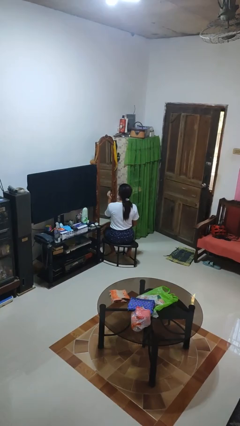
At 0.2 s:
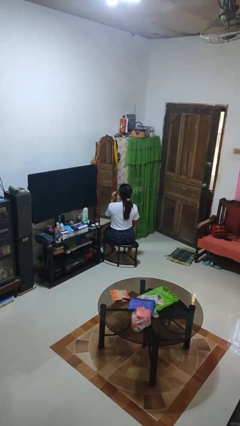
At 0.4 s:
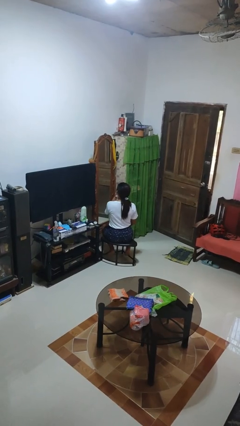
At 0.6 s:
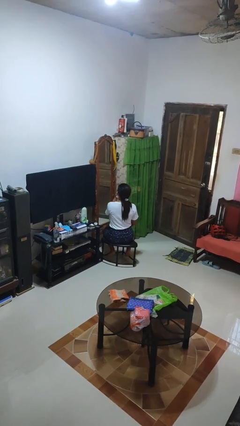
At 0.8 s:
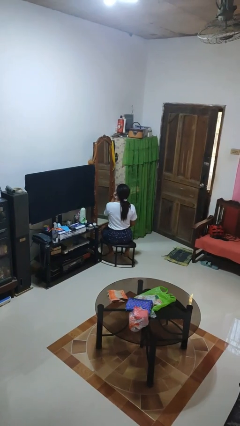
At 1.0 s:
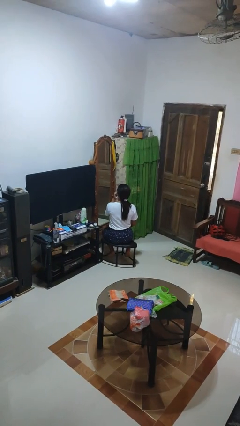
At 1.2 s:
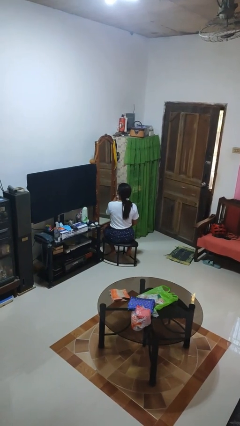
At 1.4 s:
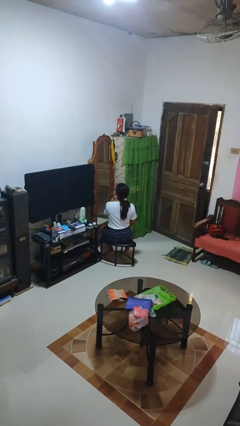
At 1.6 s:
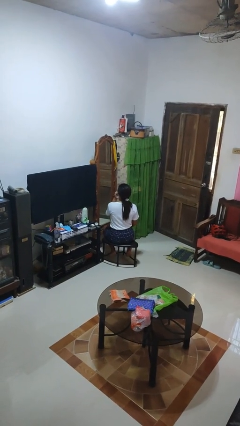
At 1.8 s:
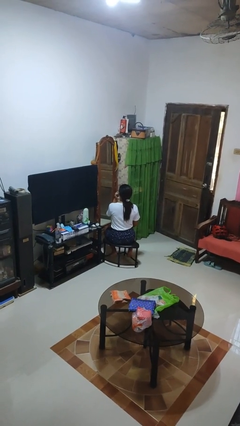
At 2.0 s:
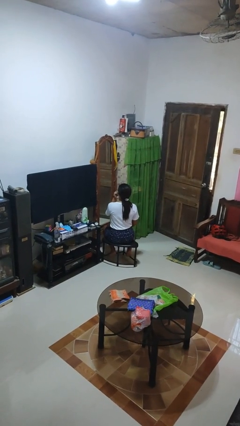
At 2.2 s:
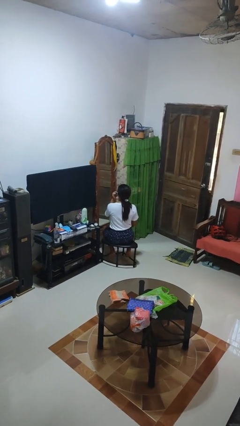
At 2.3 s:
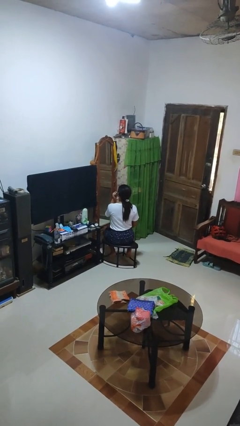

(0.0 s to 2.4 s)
person applies lip makeup

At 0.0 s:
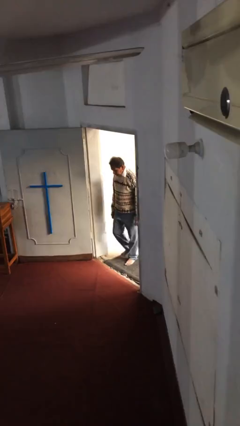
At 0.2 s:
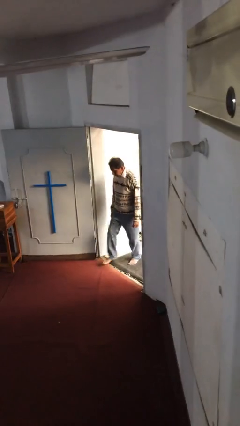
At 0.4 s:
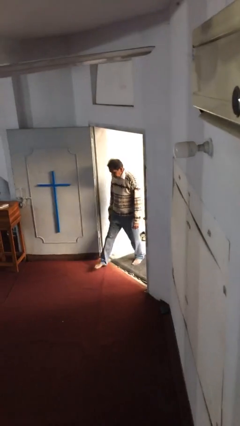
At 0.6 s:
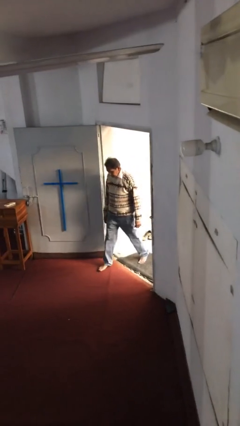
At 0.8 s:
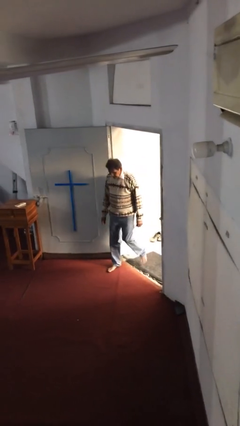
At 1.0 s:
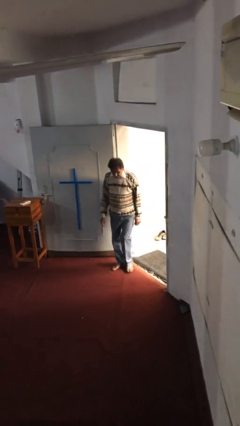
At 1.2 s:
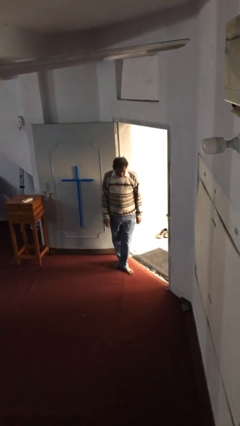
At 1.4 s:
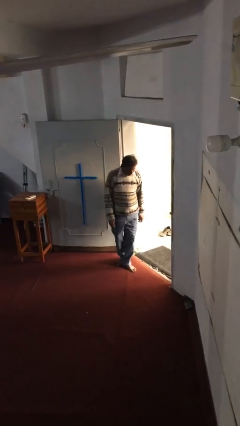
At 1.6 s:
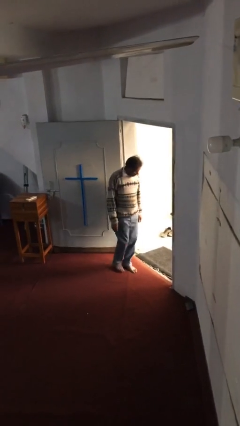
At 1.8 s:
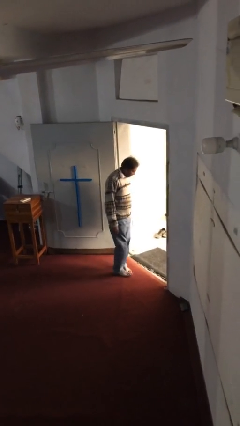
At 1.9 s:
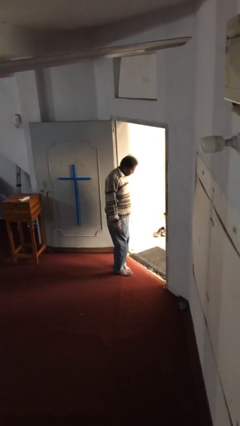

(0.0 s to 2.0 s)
person enters scene through structure

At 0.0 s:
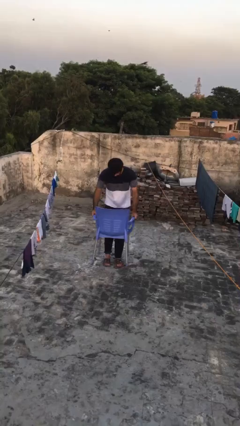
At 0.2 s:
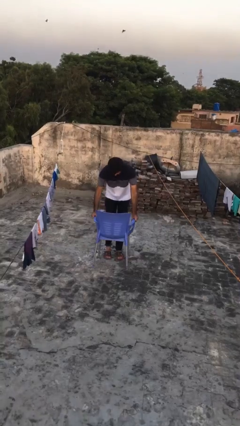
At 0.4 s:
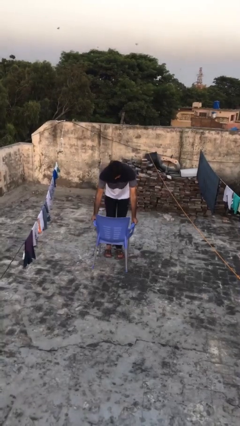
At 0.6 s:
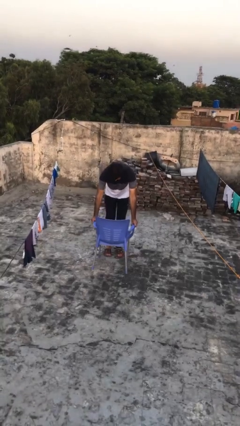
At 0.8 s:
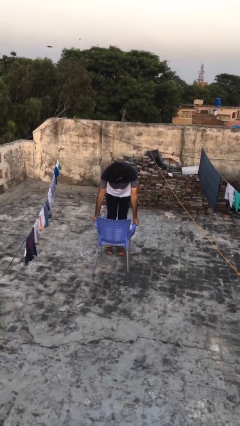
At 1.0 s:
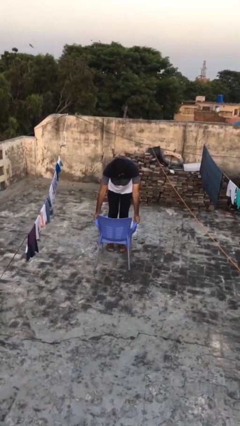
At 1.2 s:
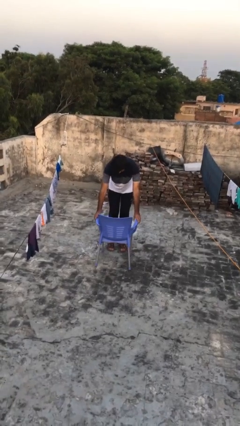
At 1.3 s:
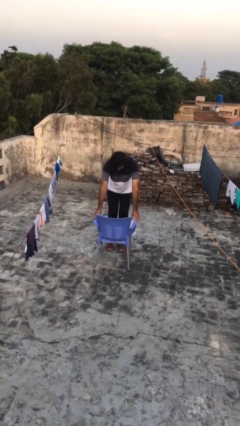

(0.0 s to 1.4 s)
person puts down object on floor

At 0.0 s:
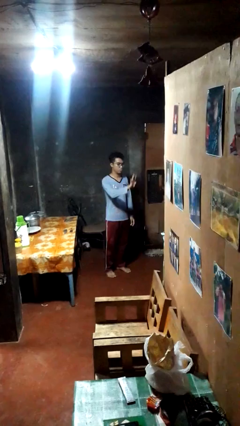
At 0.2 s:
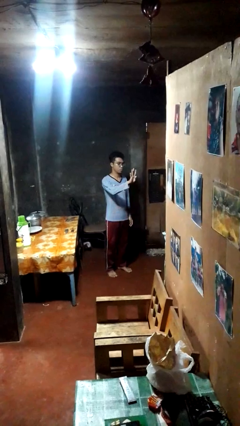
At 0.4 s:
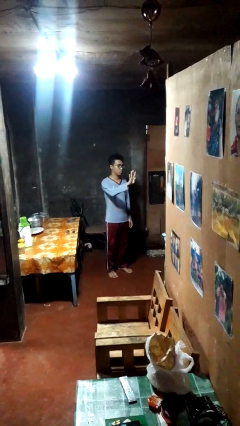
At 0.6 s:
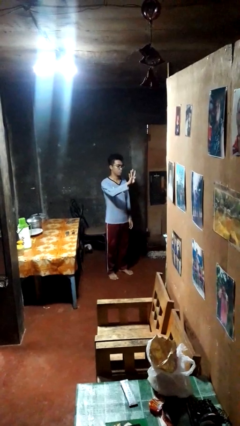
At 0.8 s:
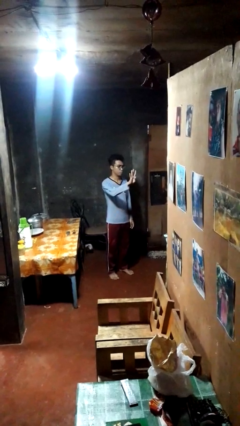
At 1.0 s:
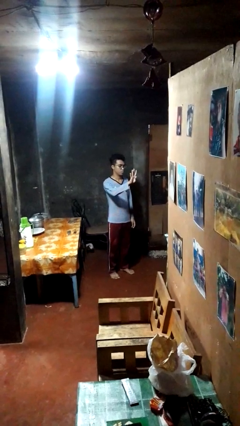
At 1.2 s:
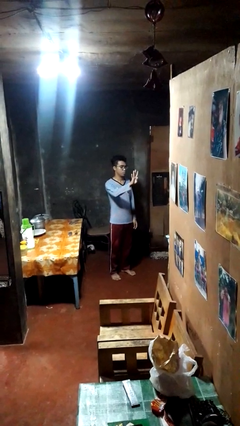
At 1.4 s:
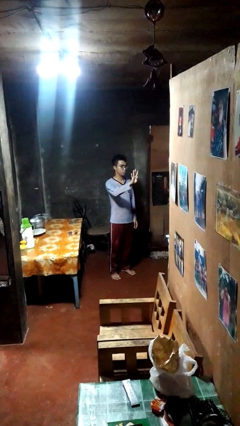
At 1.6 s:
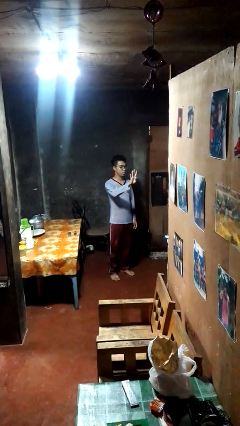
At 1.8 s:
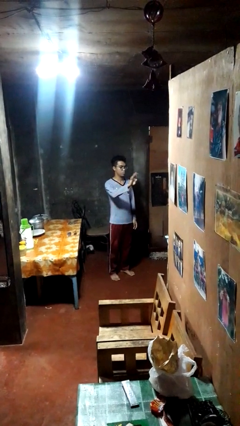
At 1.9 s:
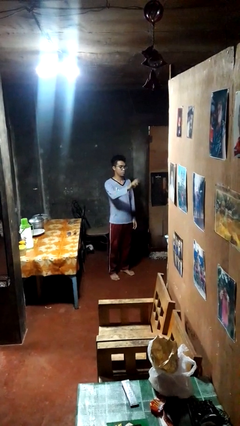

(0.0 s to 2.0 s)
person gestures number four

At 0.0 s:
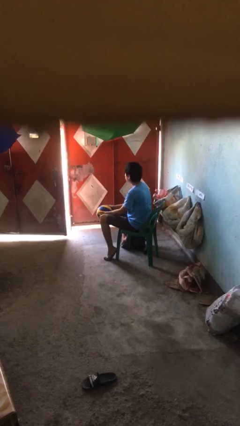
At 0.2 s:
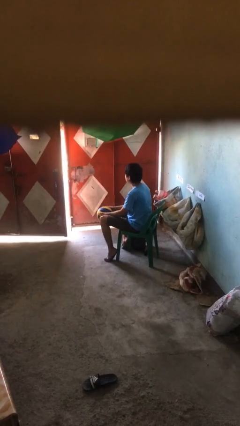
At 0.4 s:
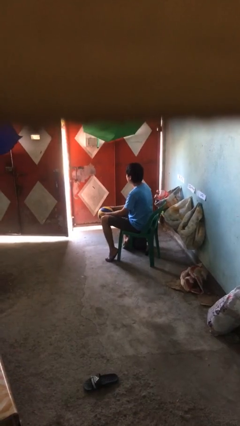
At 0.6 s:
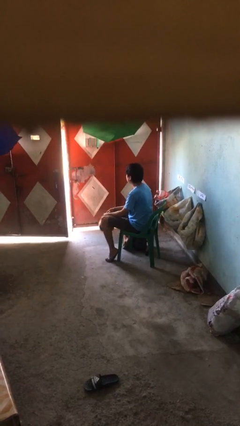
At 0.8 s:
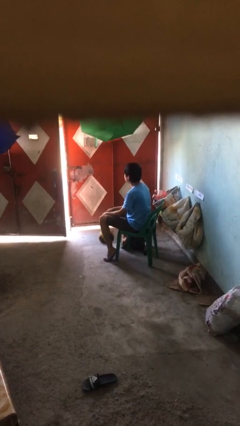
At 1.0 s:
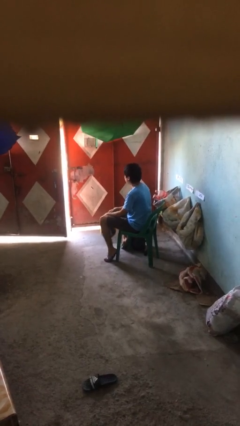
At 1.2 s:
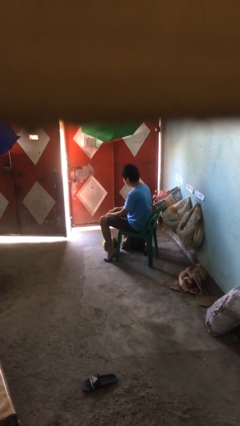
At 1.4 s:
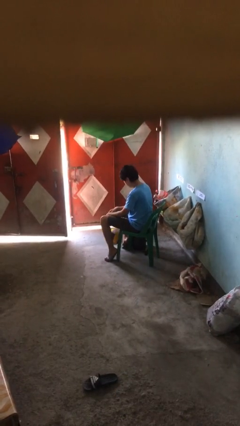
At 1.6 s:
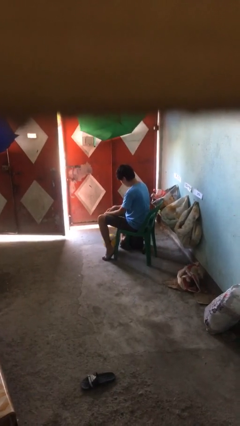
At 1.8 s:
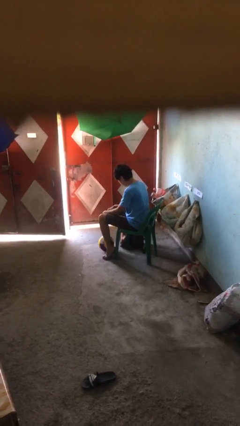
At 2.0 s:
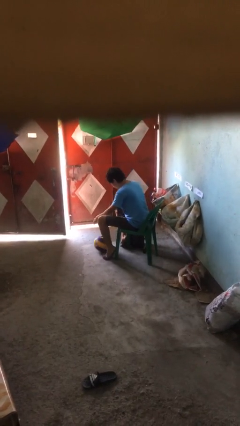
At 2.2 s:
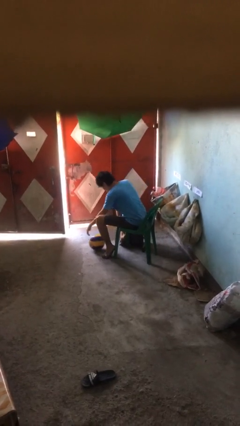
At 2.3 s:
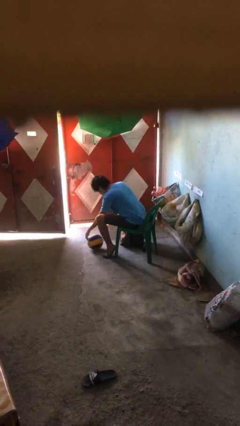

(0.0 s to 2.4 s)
person drops object

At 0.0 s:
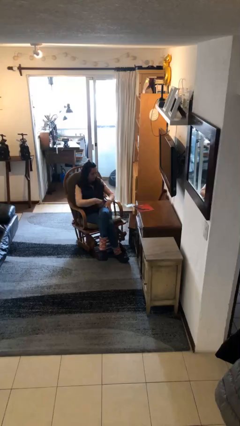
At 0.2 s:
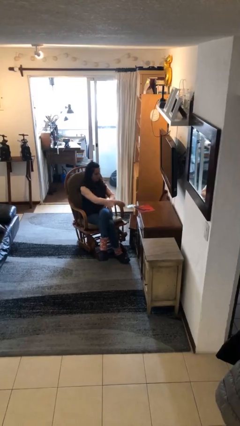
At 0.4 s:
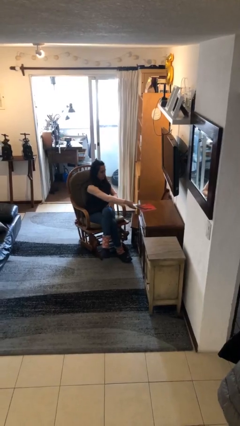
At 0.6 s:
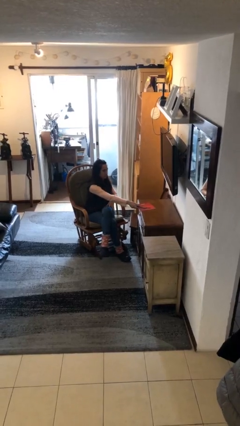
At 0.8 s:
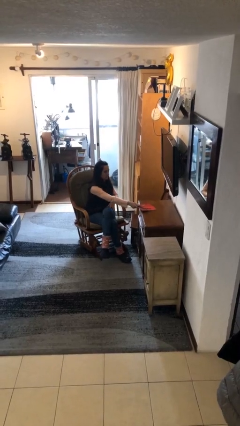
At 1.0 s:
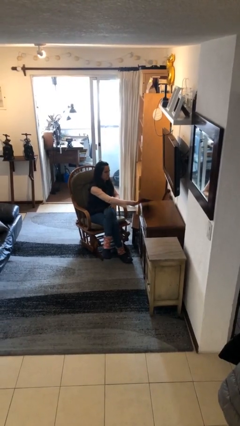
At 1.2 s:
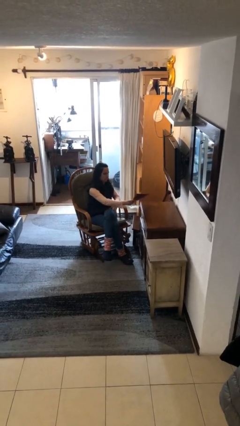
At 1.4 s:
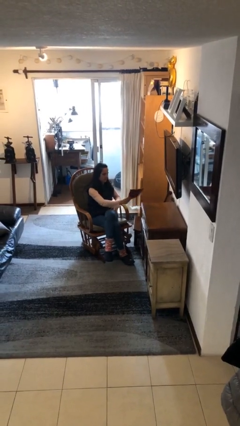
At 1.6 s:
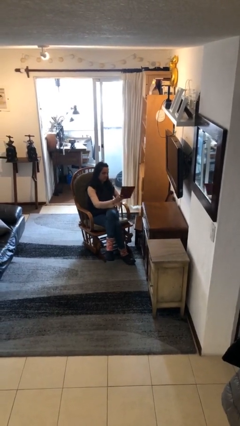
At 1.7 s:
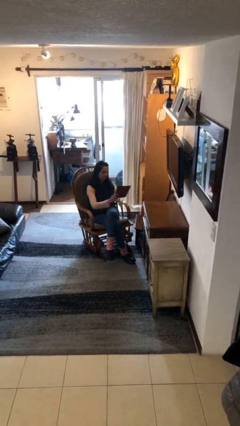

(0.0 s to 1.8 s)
person picks up object from table

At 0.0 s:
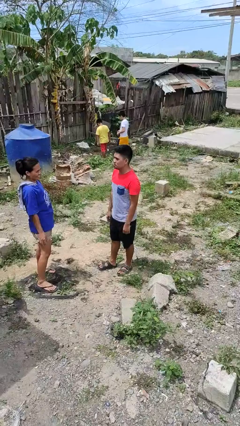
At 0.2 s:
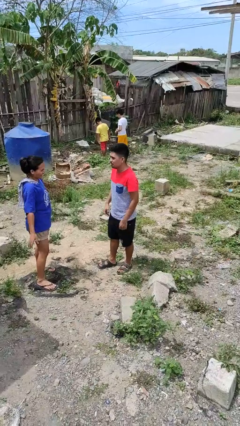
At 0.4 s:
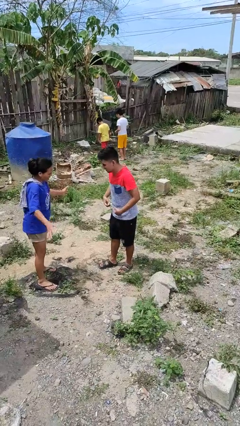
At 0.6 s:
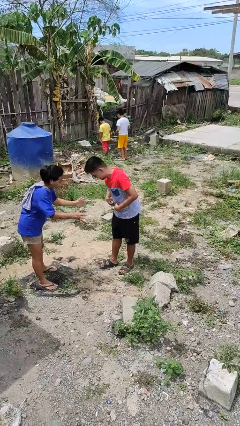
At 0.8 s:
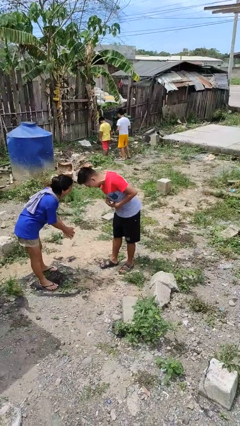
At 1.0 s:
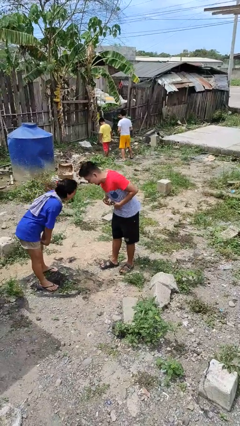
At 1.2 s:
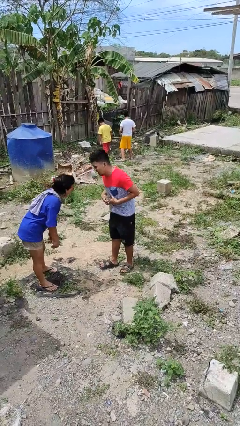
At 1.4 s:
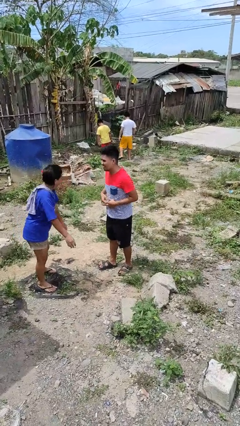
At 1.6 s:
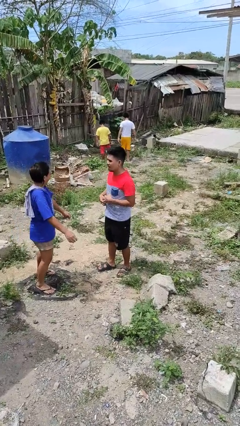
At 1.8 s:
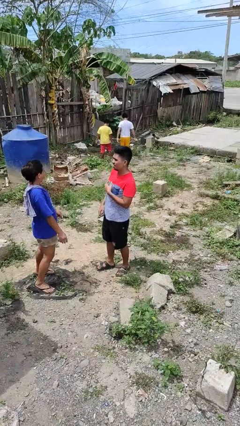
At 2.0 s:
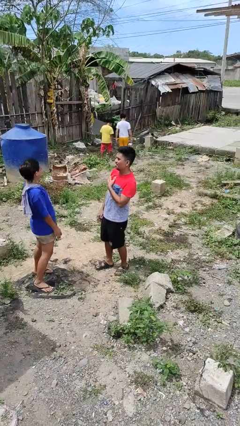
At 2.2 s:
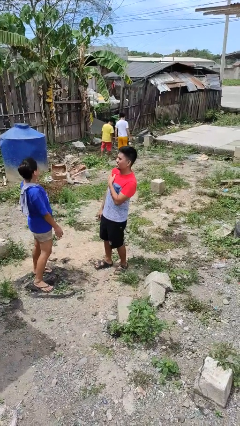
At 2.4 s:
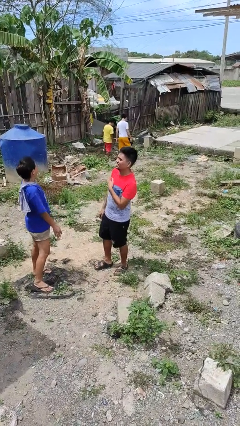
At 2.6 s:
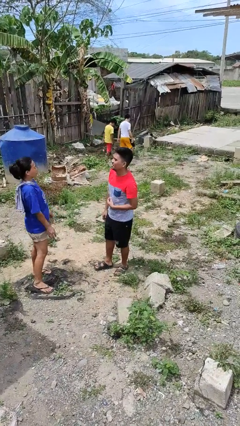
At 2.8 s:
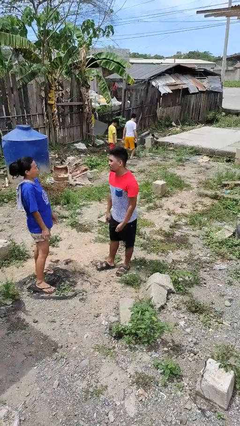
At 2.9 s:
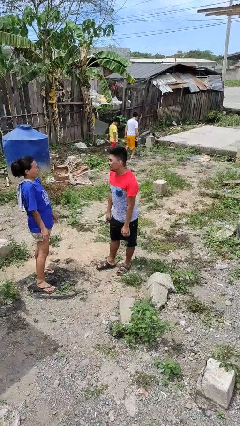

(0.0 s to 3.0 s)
person laughs with person

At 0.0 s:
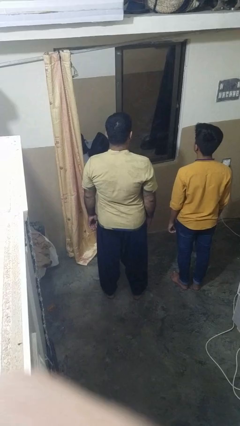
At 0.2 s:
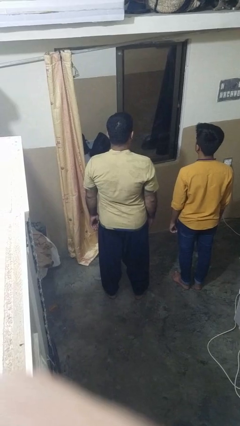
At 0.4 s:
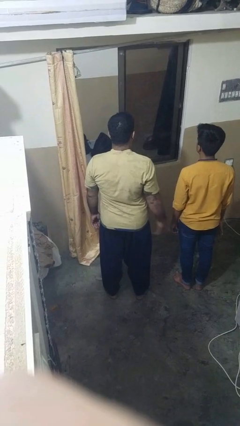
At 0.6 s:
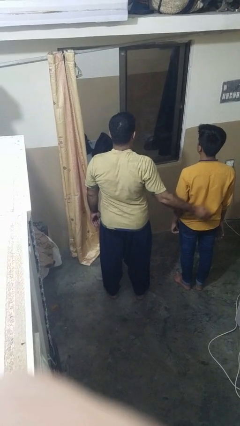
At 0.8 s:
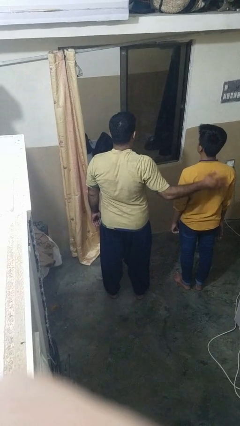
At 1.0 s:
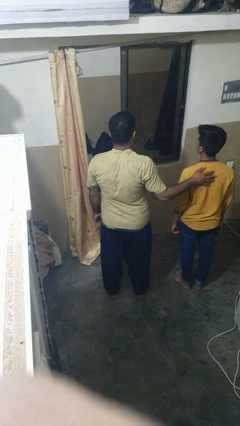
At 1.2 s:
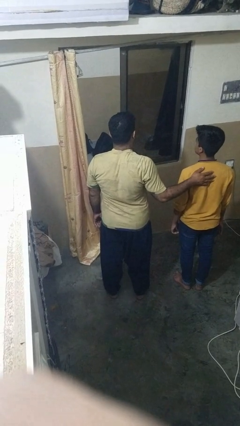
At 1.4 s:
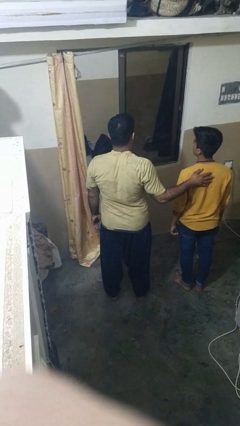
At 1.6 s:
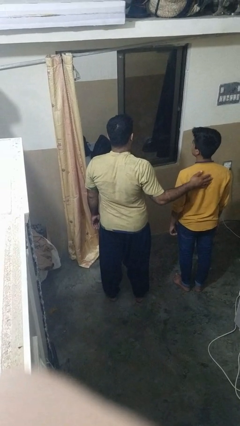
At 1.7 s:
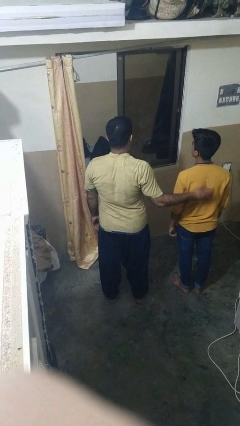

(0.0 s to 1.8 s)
person touches back of person

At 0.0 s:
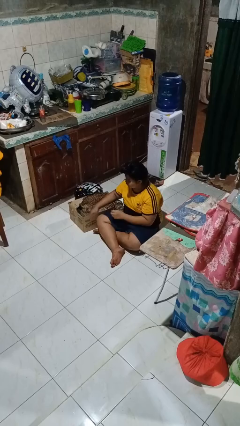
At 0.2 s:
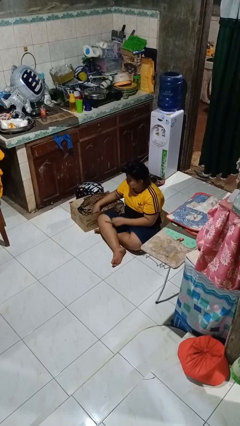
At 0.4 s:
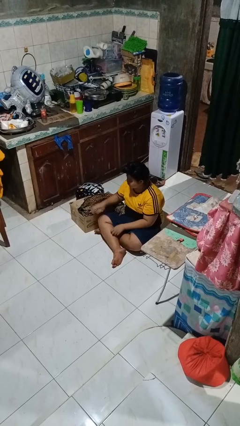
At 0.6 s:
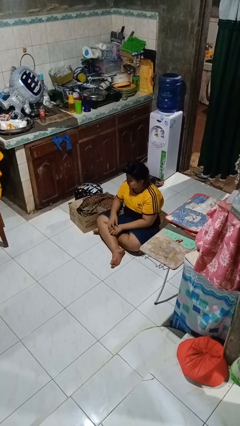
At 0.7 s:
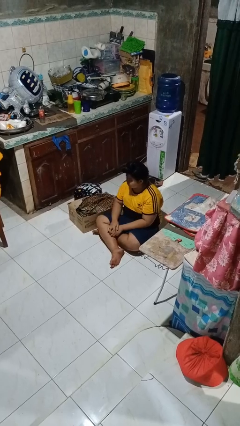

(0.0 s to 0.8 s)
person puts object into box
